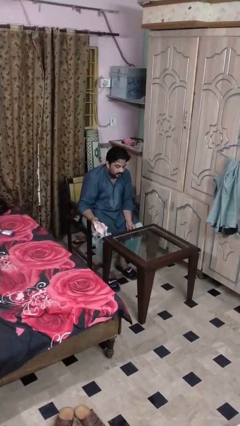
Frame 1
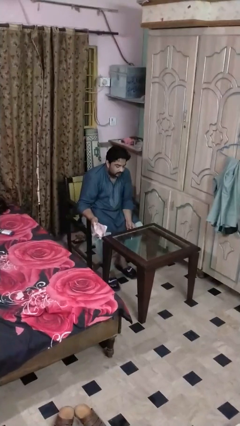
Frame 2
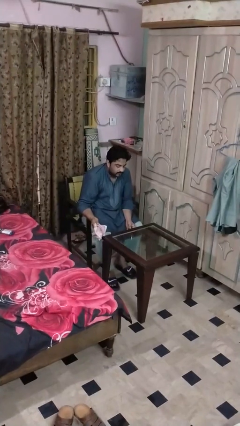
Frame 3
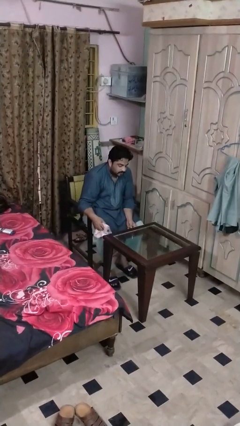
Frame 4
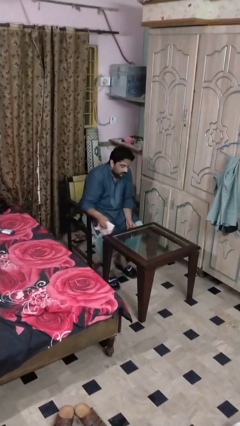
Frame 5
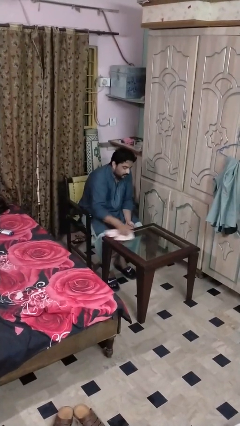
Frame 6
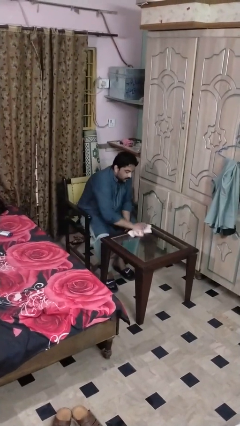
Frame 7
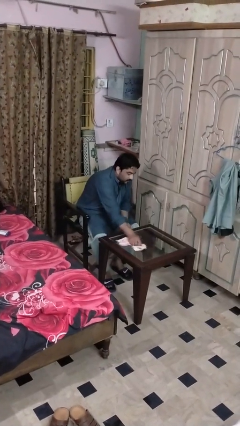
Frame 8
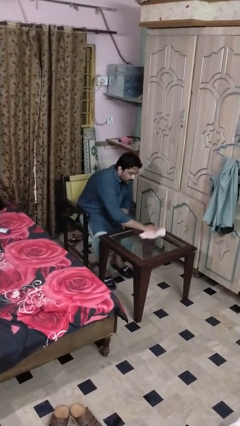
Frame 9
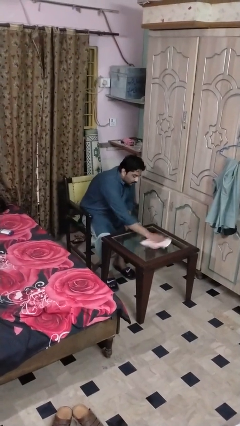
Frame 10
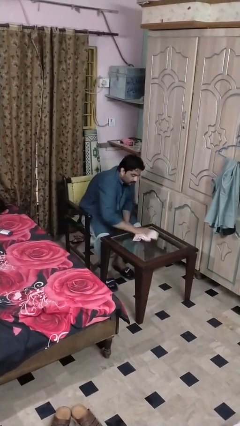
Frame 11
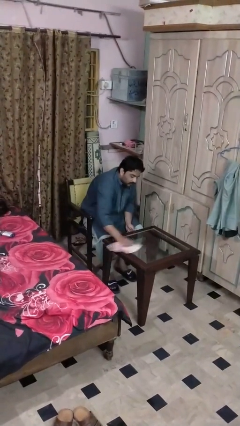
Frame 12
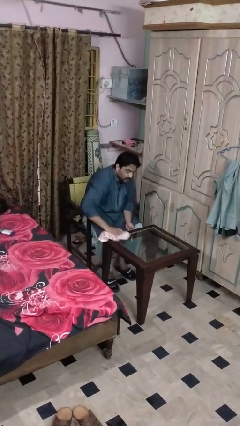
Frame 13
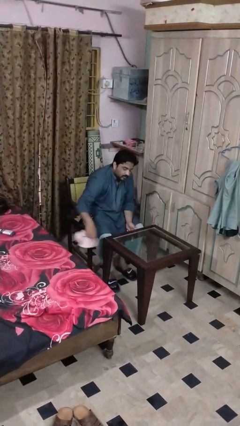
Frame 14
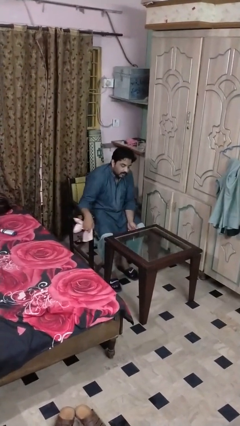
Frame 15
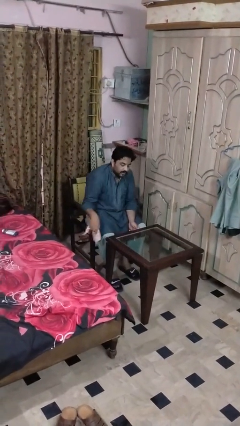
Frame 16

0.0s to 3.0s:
person cleans table with rag

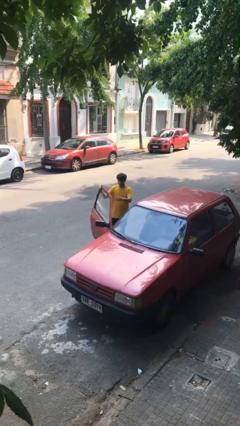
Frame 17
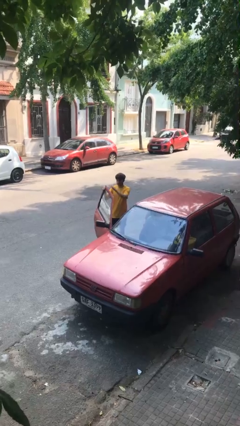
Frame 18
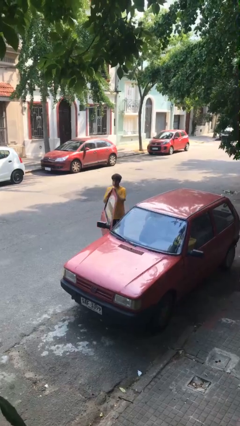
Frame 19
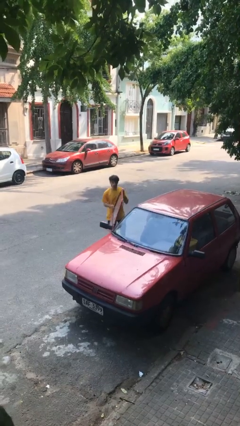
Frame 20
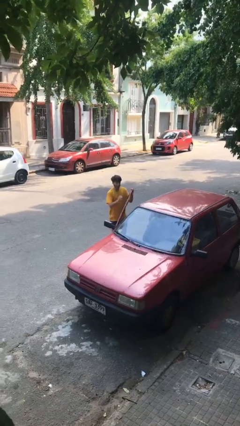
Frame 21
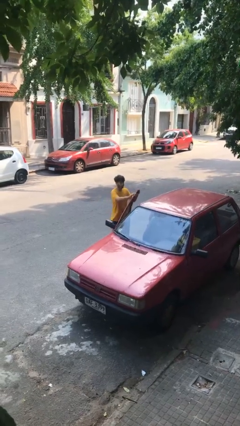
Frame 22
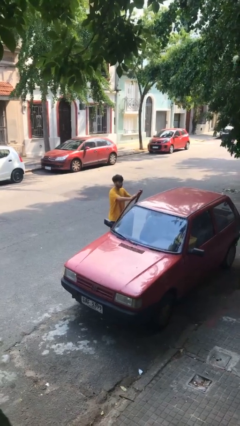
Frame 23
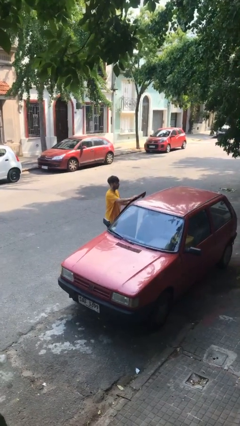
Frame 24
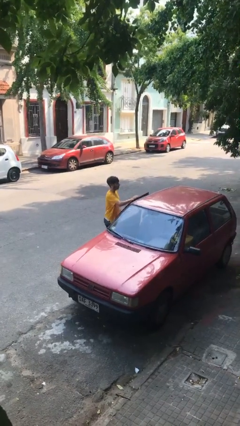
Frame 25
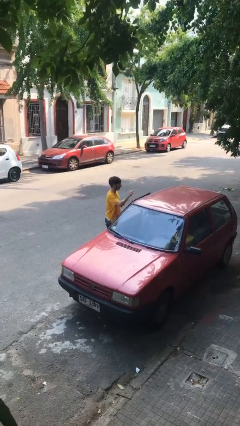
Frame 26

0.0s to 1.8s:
person closes car door

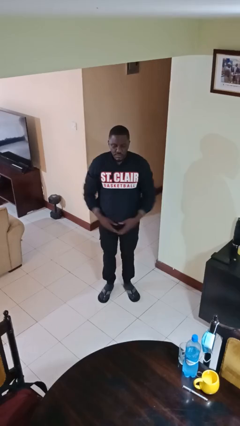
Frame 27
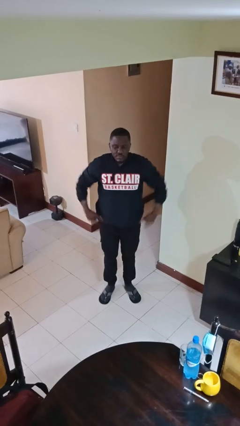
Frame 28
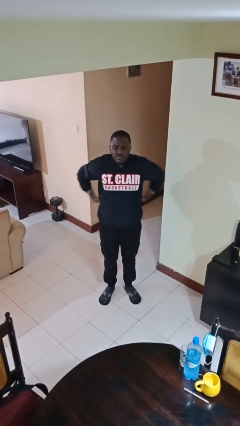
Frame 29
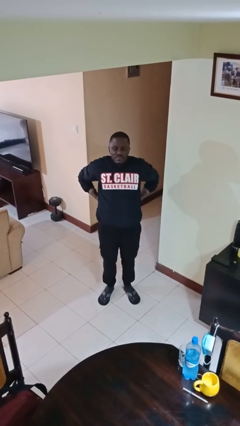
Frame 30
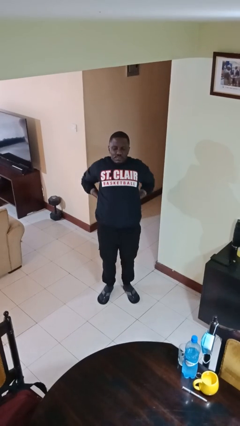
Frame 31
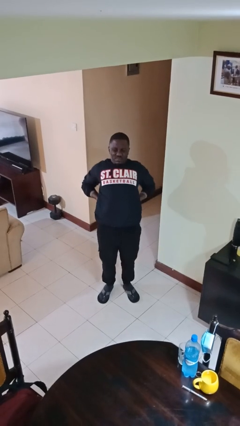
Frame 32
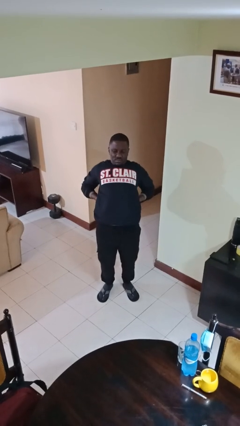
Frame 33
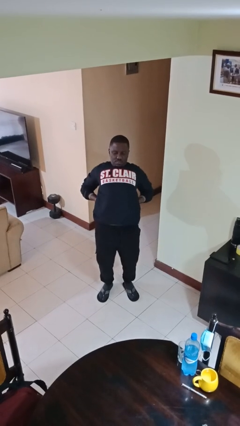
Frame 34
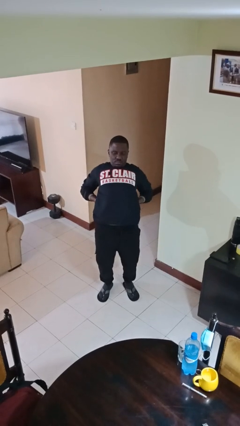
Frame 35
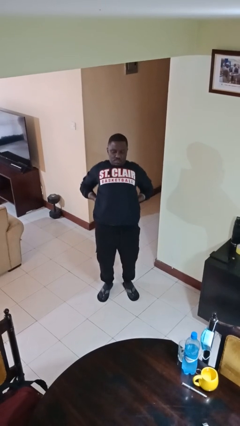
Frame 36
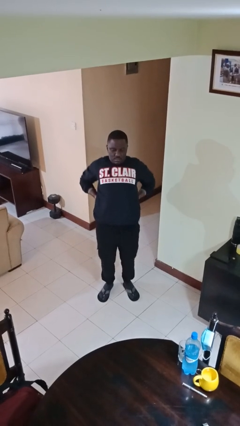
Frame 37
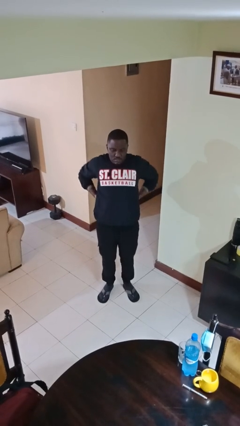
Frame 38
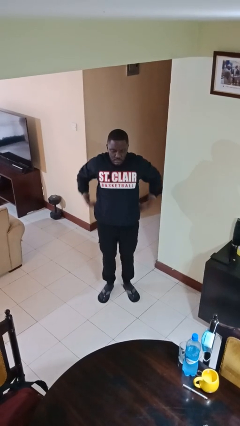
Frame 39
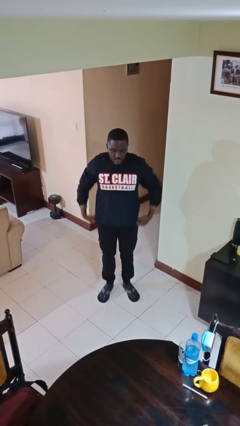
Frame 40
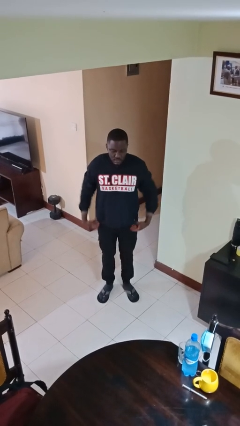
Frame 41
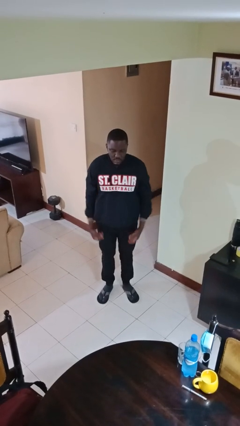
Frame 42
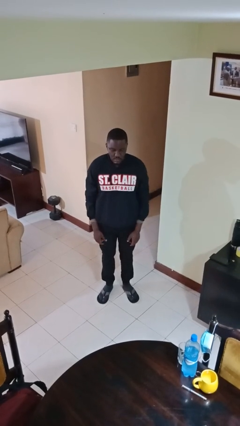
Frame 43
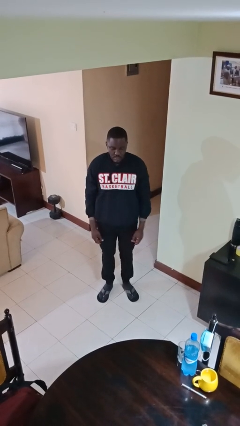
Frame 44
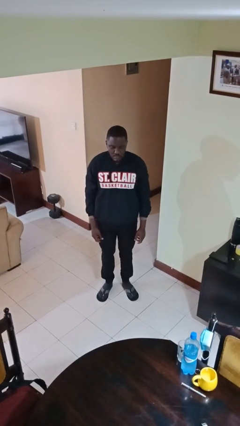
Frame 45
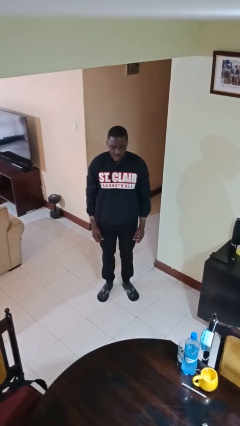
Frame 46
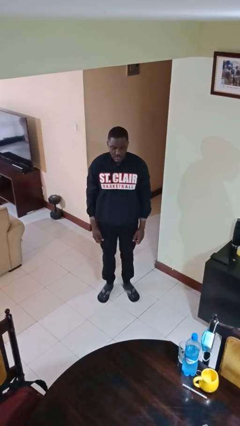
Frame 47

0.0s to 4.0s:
person stretches back

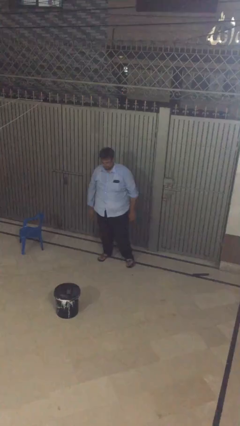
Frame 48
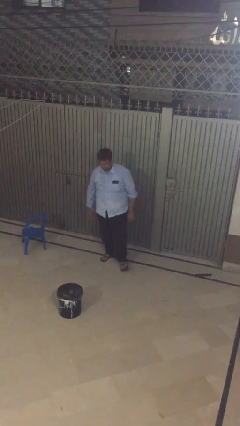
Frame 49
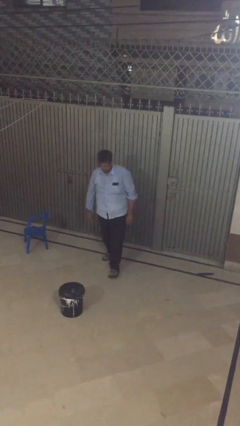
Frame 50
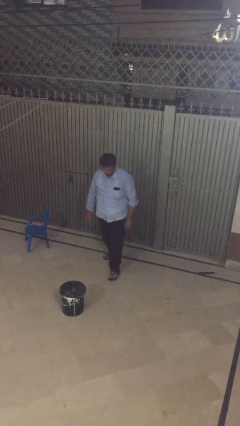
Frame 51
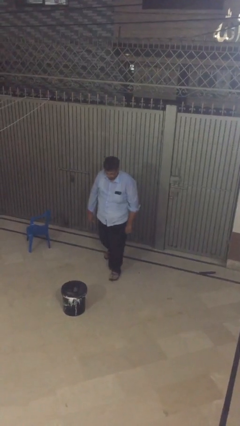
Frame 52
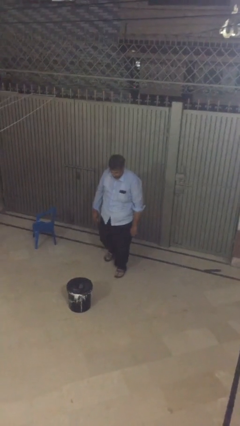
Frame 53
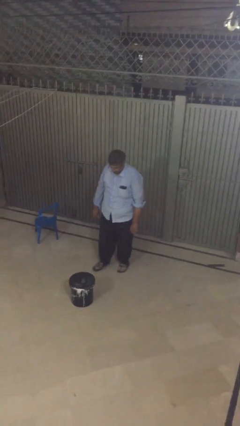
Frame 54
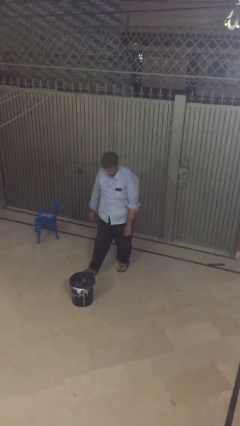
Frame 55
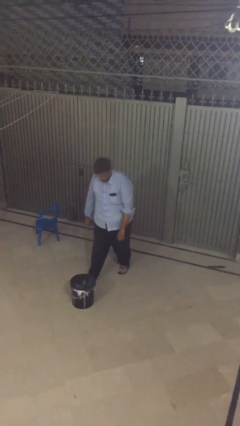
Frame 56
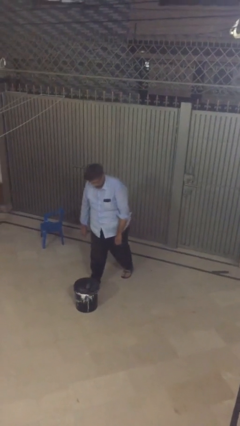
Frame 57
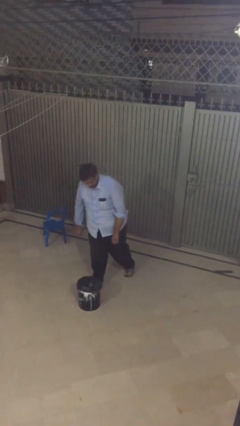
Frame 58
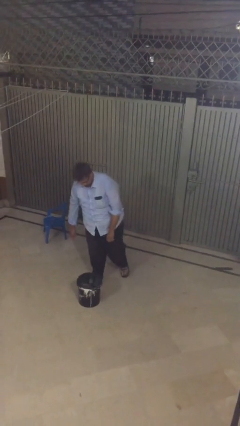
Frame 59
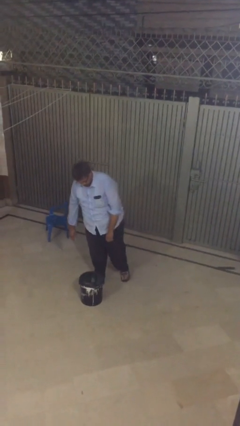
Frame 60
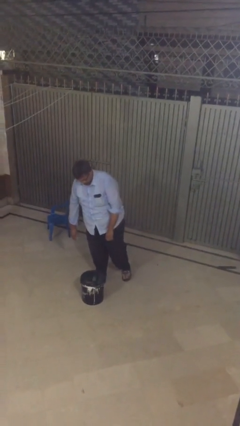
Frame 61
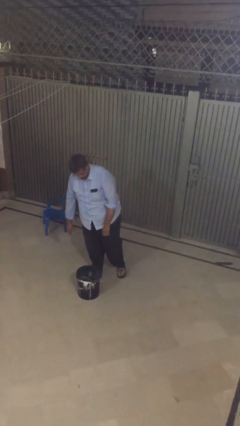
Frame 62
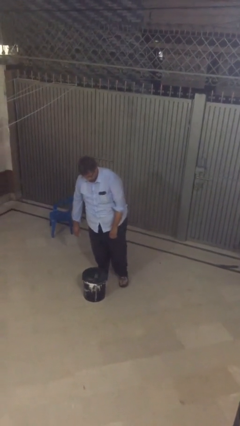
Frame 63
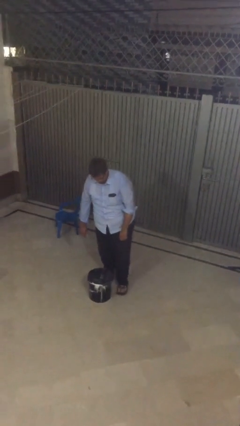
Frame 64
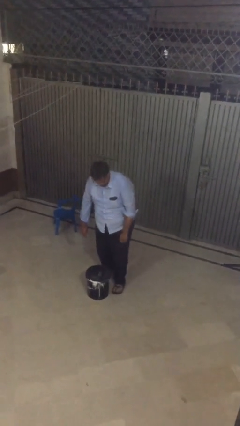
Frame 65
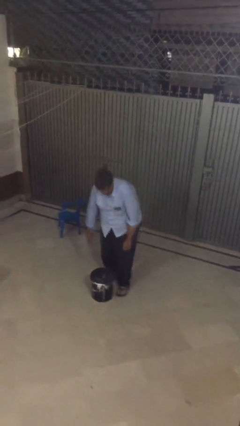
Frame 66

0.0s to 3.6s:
person picks up object from floor

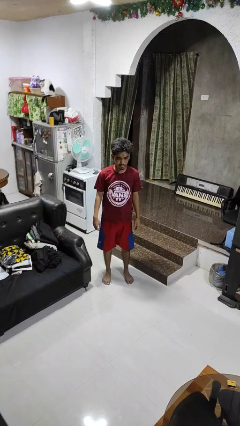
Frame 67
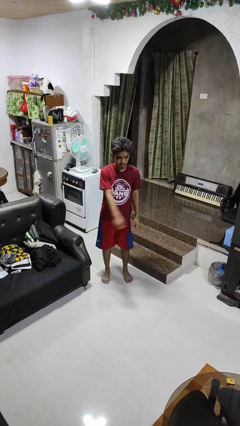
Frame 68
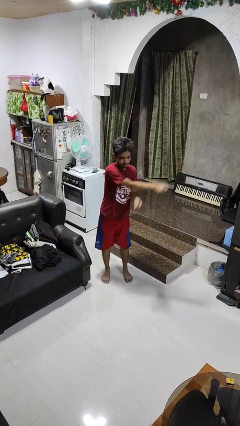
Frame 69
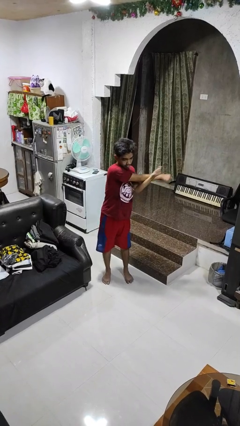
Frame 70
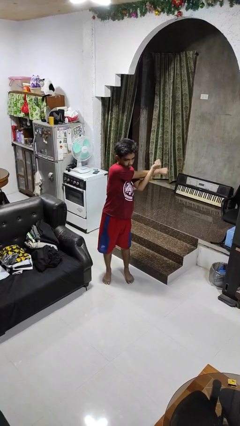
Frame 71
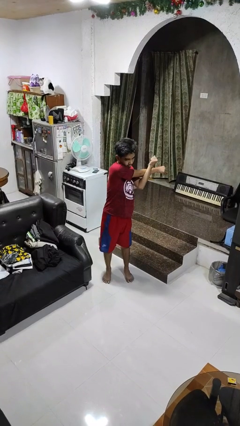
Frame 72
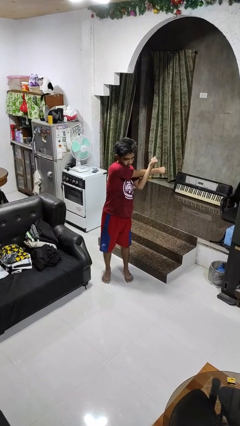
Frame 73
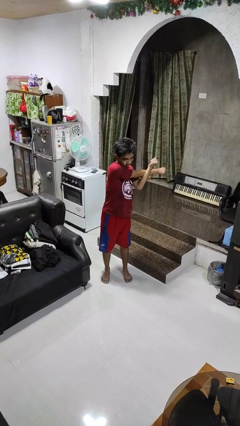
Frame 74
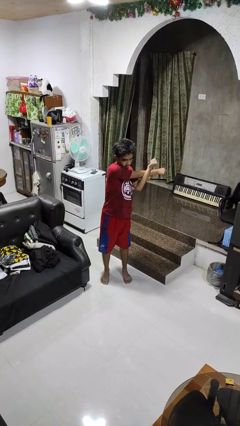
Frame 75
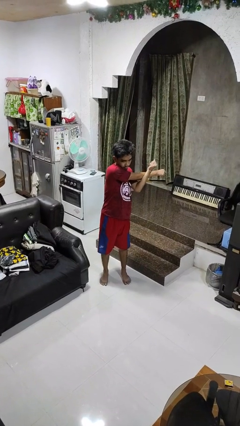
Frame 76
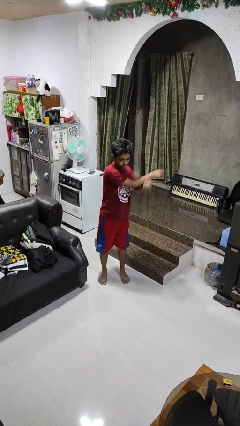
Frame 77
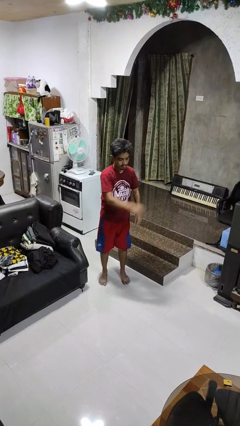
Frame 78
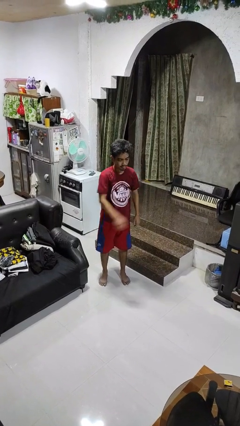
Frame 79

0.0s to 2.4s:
person stretches arms to side

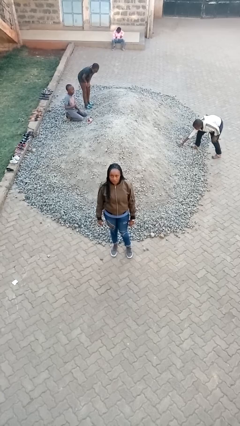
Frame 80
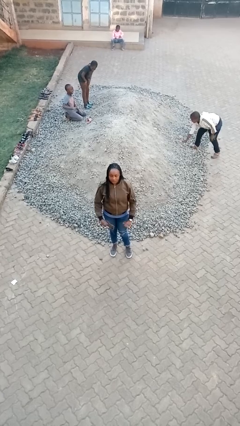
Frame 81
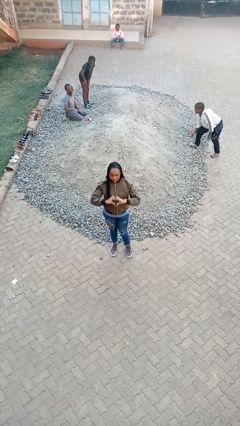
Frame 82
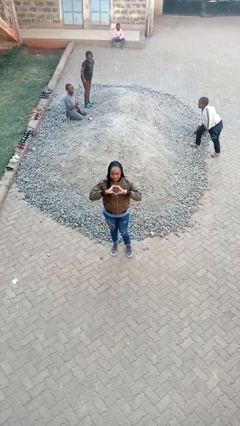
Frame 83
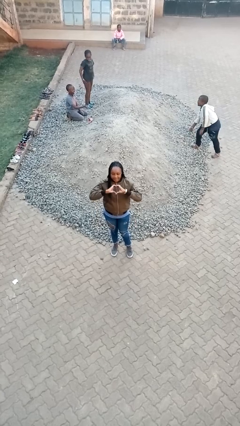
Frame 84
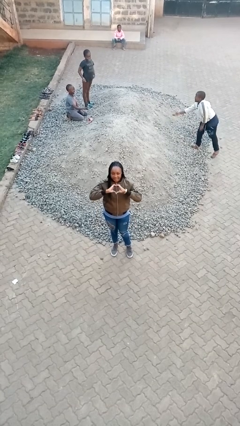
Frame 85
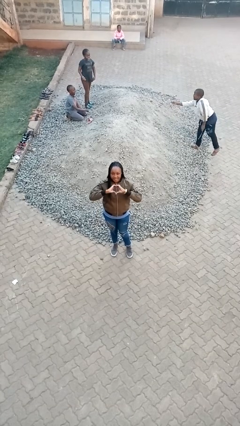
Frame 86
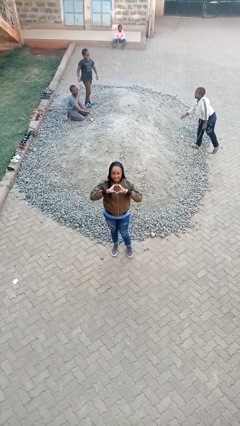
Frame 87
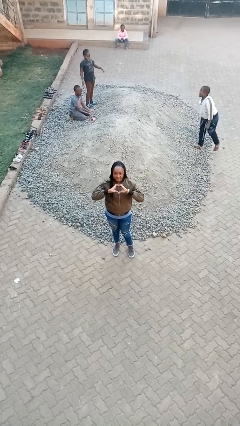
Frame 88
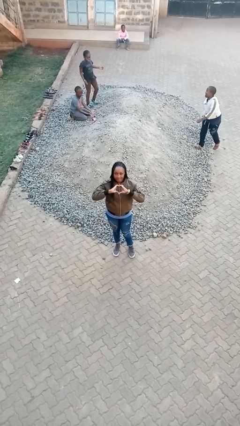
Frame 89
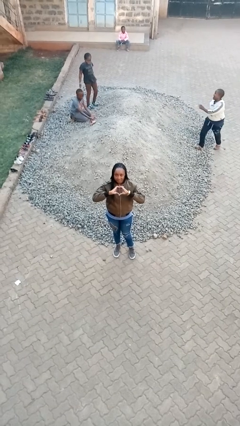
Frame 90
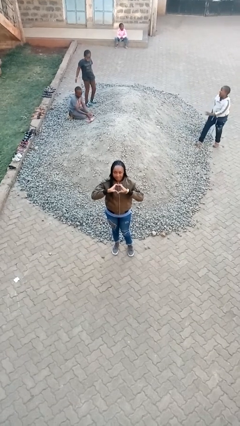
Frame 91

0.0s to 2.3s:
person gestures heart

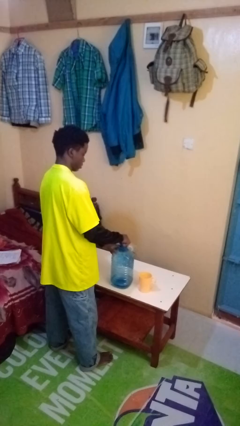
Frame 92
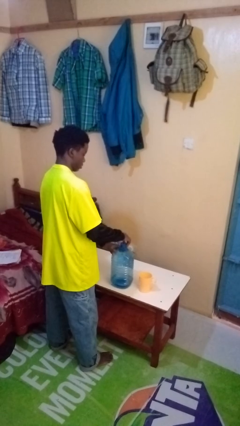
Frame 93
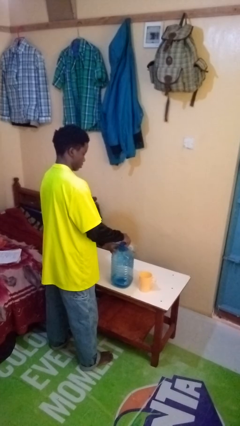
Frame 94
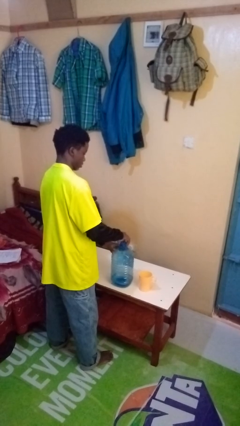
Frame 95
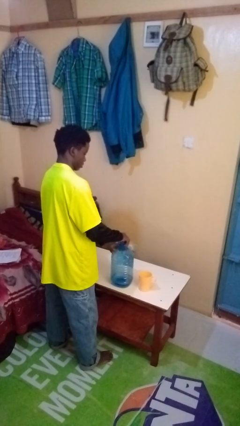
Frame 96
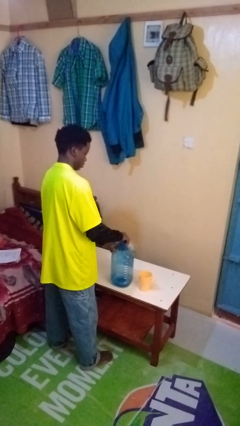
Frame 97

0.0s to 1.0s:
person unscrews lid from bottle
